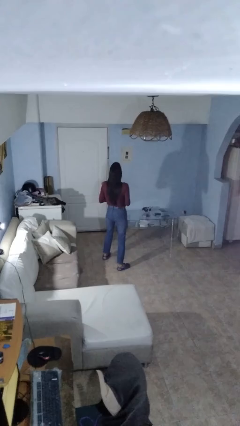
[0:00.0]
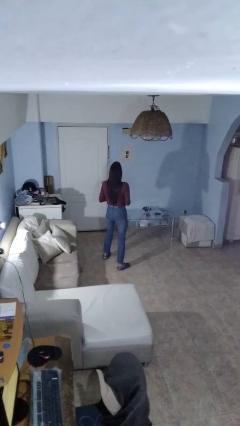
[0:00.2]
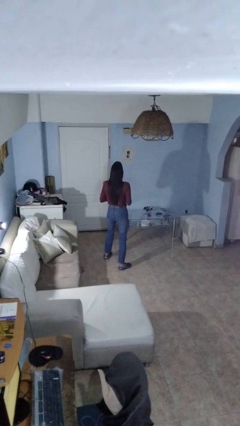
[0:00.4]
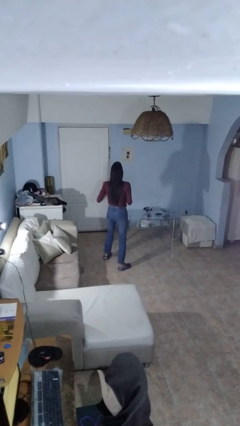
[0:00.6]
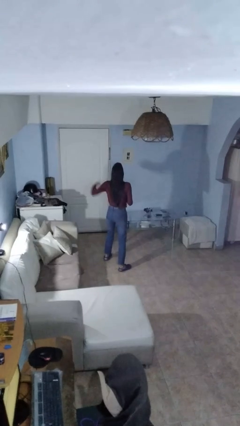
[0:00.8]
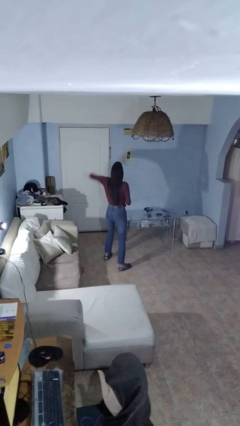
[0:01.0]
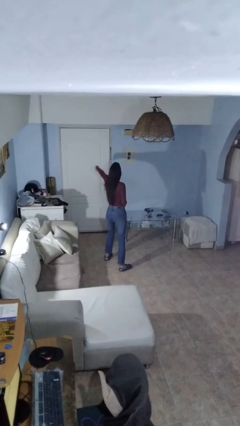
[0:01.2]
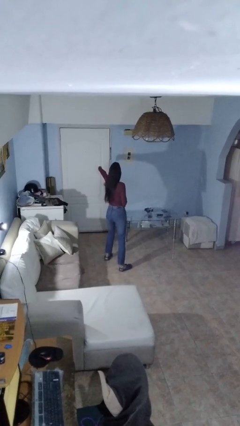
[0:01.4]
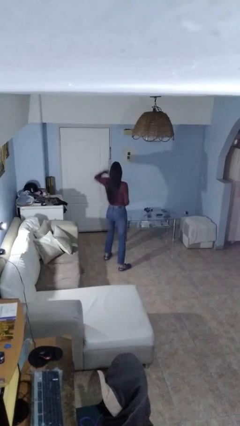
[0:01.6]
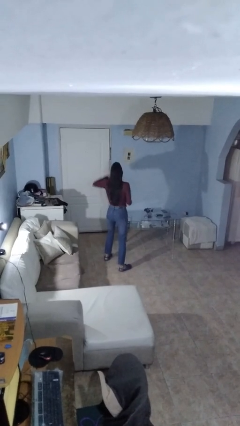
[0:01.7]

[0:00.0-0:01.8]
person karate chop

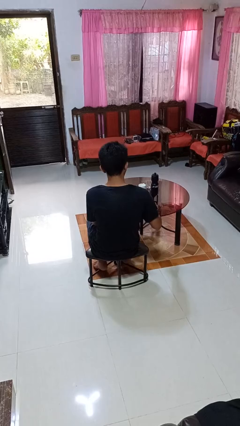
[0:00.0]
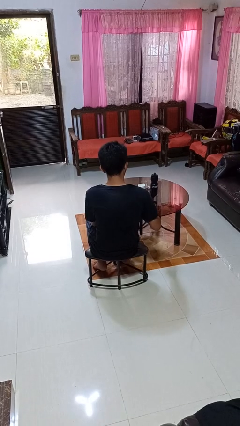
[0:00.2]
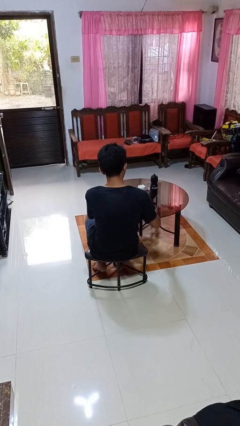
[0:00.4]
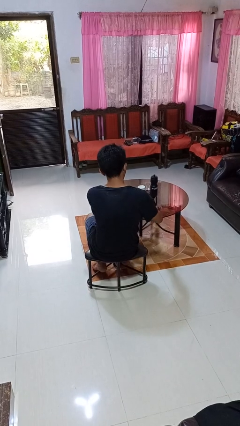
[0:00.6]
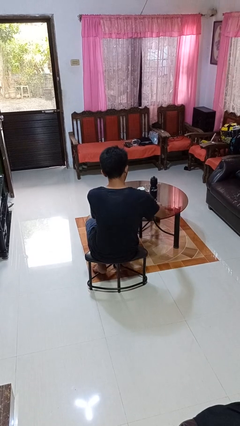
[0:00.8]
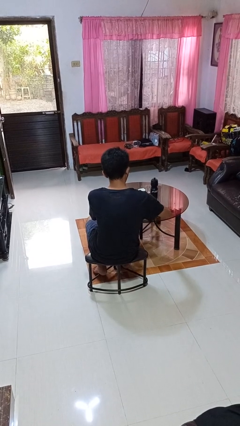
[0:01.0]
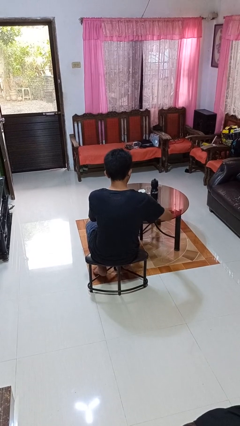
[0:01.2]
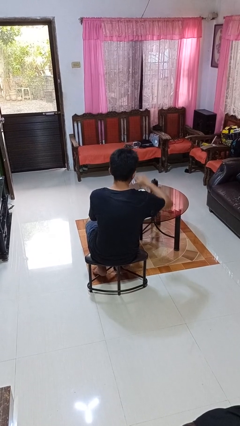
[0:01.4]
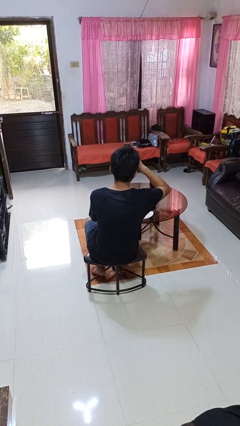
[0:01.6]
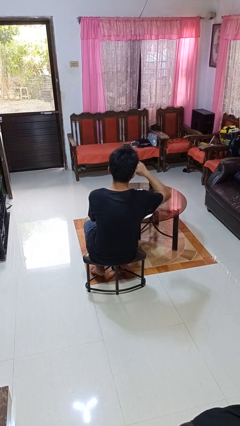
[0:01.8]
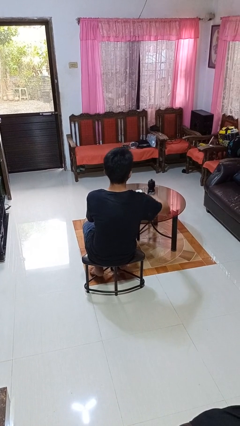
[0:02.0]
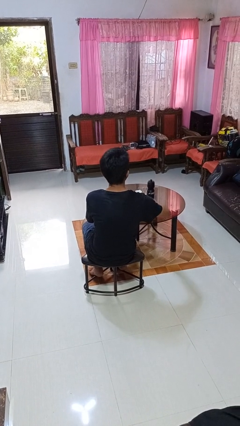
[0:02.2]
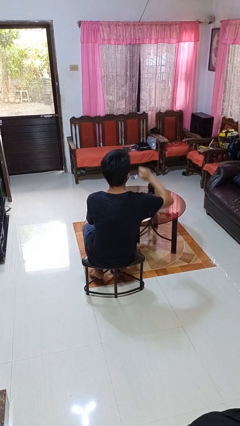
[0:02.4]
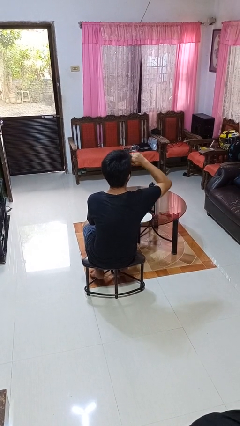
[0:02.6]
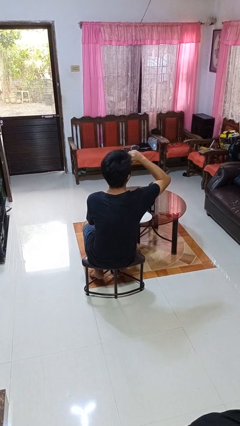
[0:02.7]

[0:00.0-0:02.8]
person eats with utensil

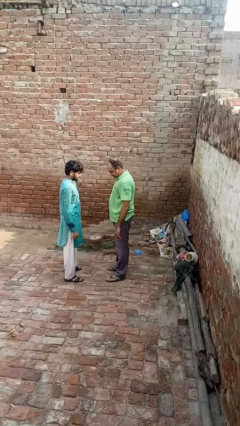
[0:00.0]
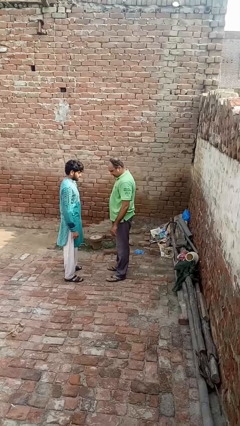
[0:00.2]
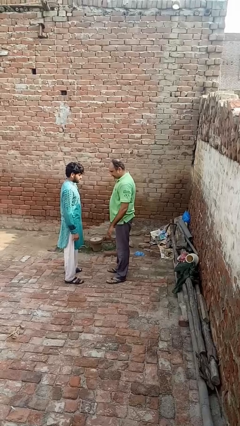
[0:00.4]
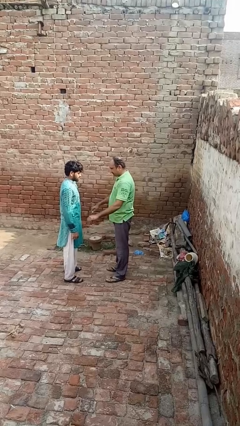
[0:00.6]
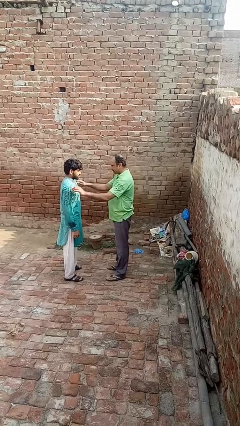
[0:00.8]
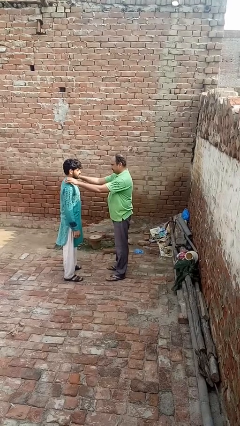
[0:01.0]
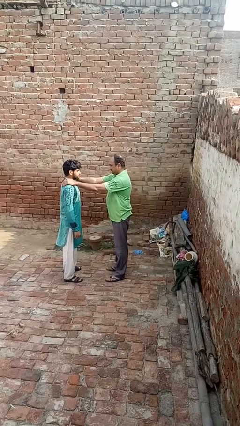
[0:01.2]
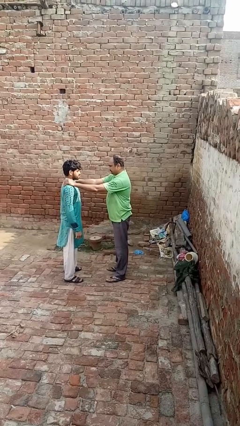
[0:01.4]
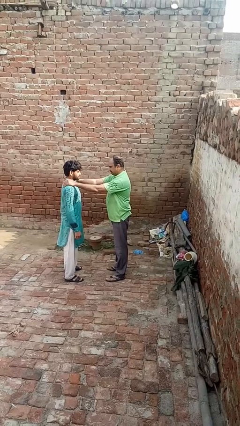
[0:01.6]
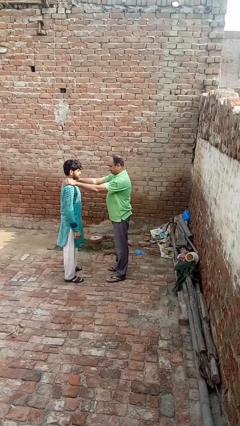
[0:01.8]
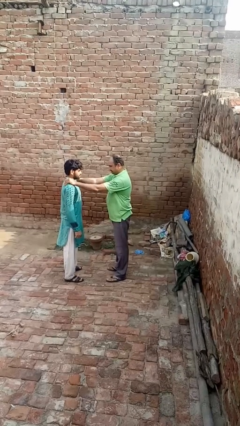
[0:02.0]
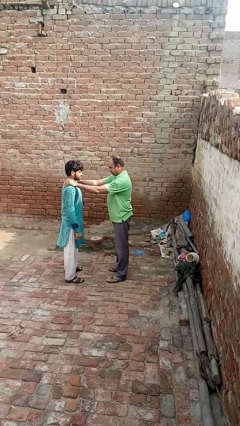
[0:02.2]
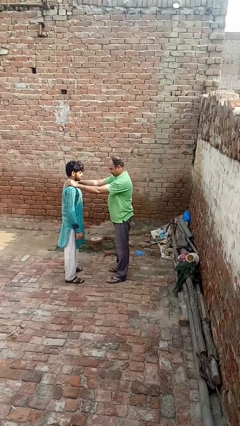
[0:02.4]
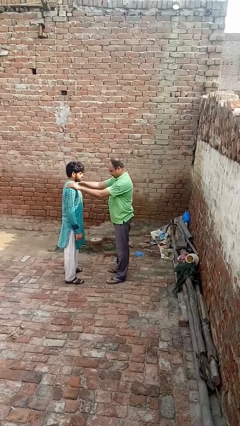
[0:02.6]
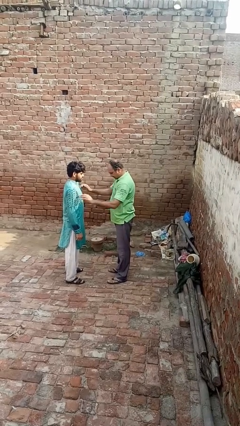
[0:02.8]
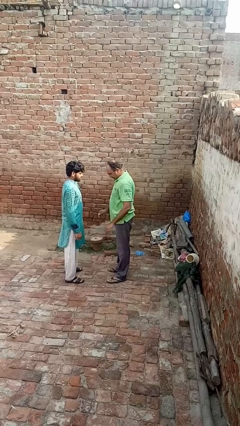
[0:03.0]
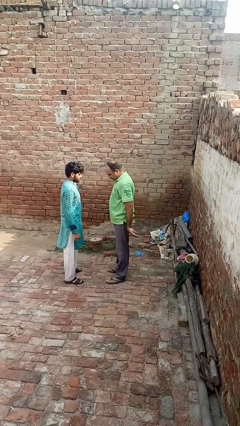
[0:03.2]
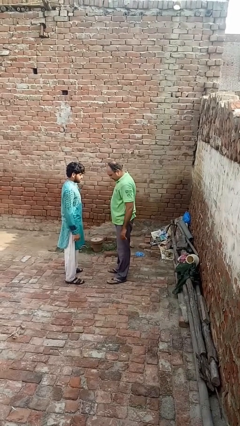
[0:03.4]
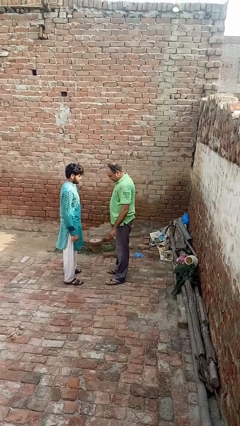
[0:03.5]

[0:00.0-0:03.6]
person pounds shoulders of person

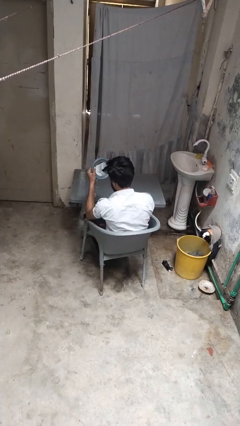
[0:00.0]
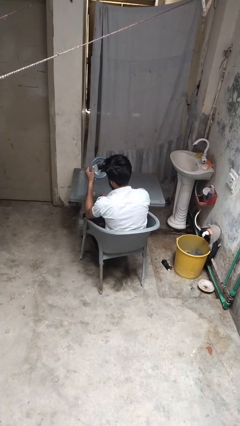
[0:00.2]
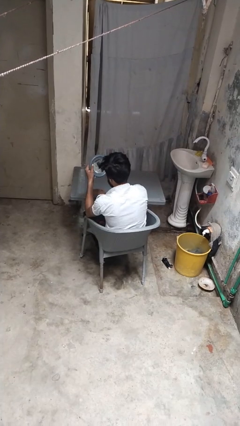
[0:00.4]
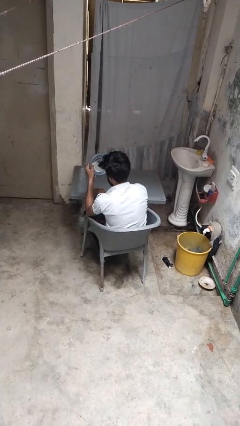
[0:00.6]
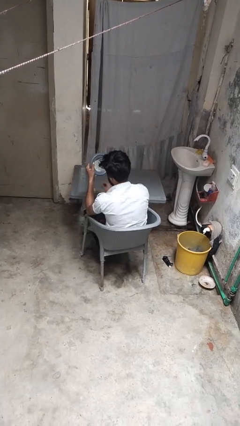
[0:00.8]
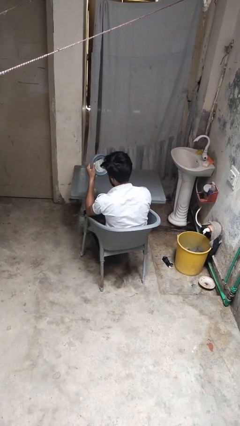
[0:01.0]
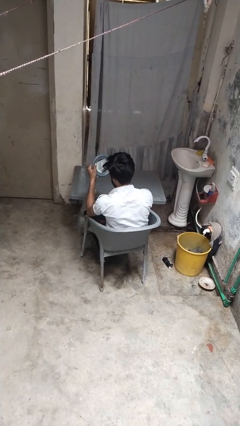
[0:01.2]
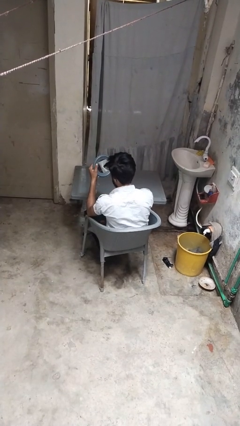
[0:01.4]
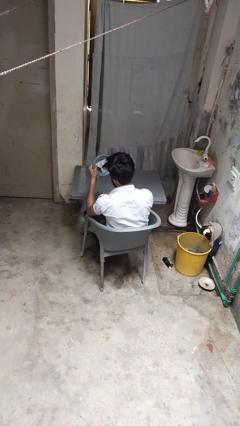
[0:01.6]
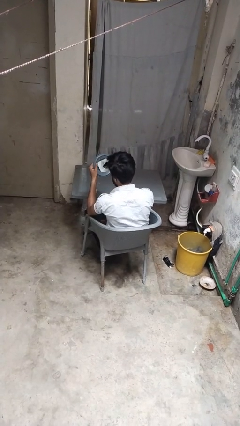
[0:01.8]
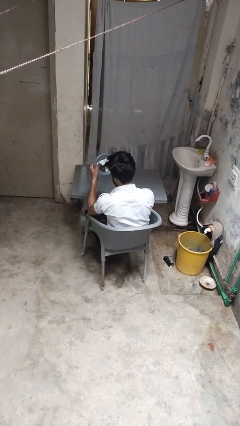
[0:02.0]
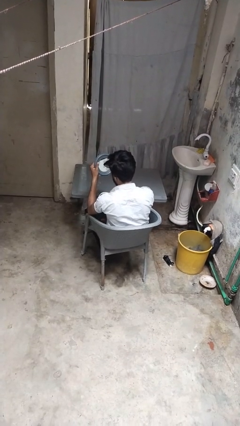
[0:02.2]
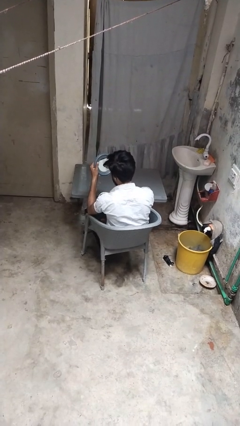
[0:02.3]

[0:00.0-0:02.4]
person applies foundation makeup

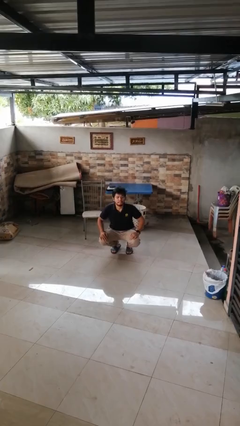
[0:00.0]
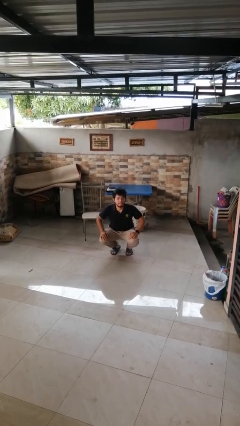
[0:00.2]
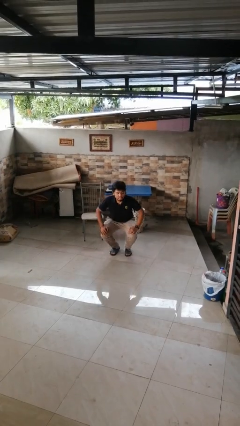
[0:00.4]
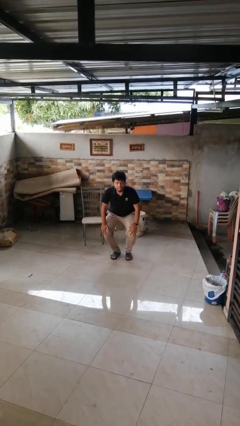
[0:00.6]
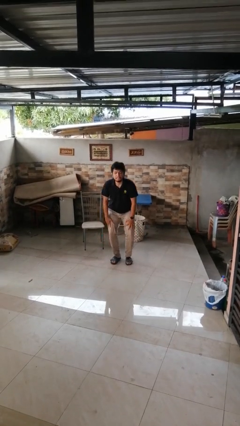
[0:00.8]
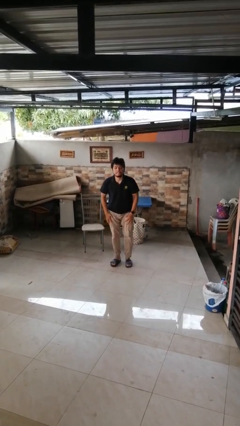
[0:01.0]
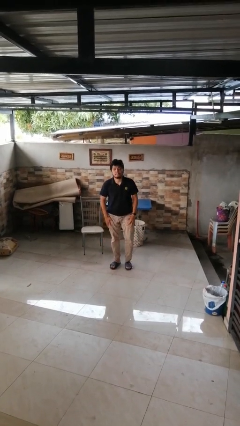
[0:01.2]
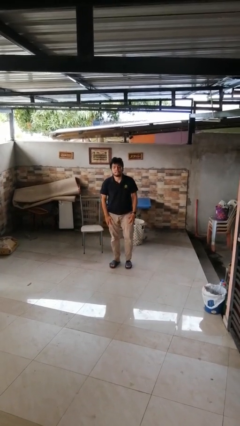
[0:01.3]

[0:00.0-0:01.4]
person stands up

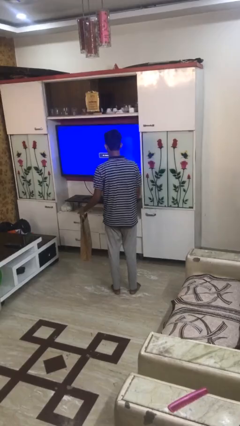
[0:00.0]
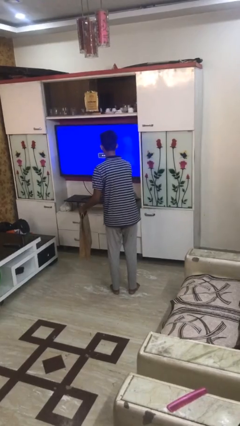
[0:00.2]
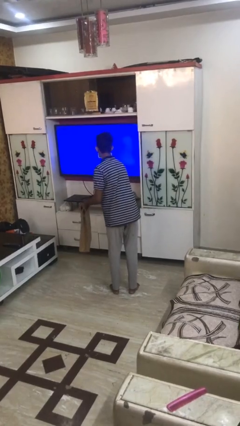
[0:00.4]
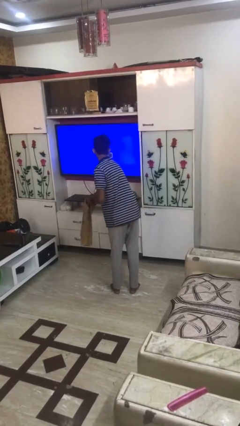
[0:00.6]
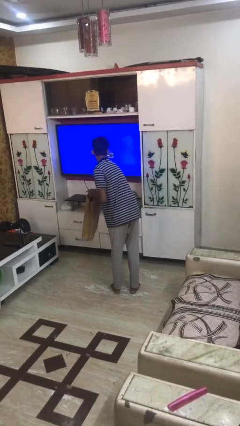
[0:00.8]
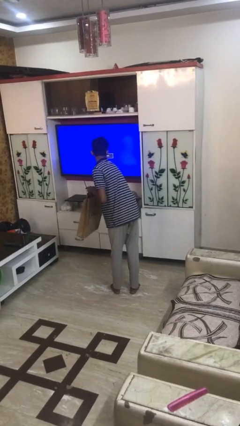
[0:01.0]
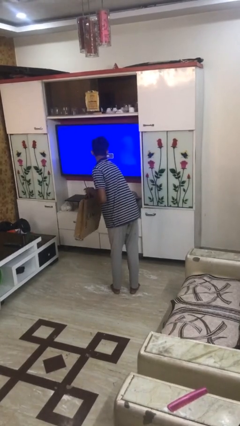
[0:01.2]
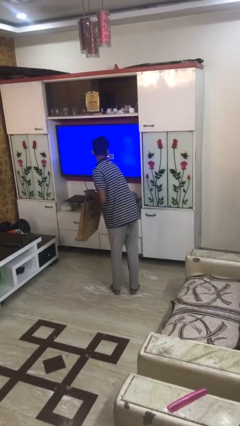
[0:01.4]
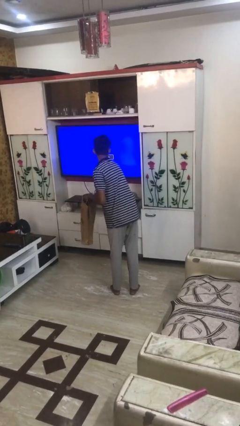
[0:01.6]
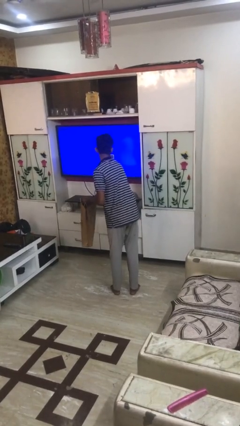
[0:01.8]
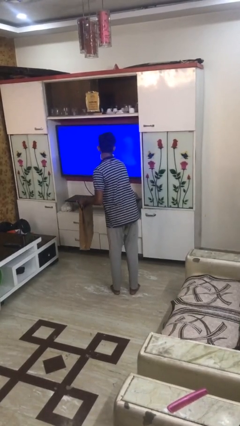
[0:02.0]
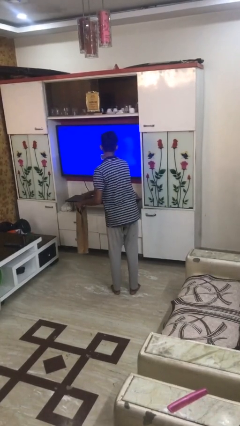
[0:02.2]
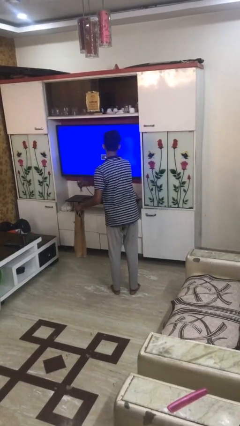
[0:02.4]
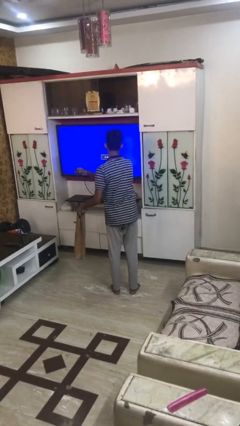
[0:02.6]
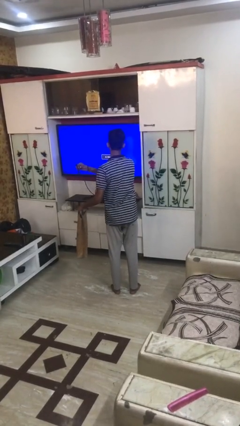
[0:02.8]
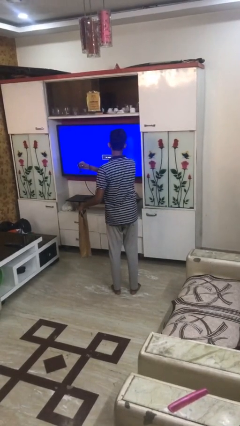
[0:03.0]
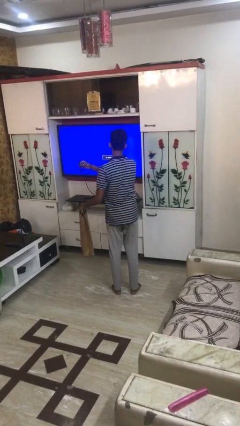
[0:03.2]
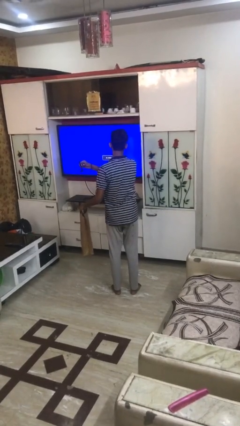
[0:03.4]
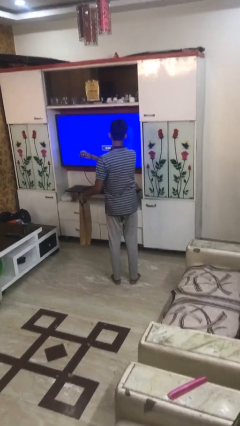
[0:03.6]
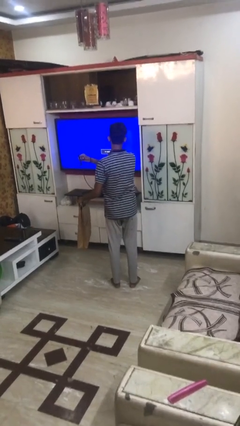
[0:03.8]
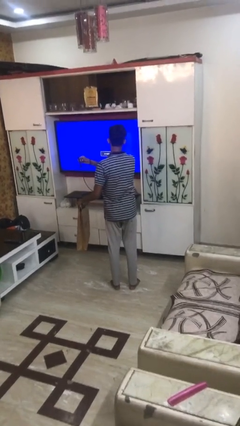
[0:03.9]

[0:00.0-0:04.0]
person takes object from bag

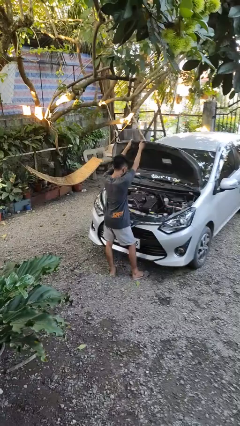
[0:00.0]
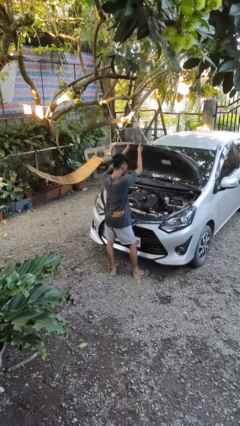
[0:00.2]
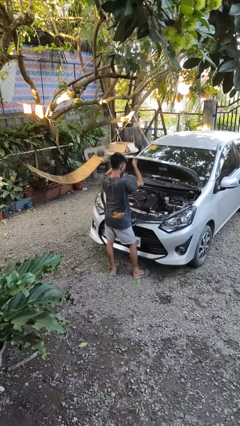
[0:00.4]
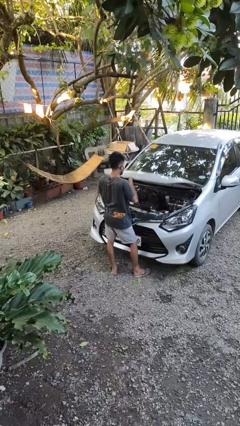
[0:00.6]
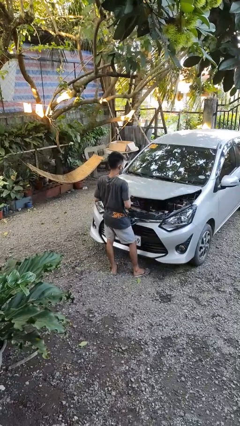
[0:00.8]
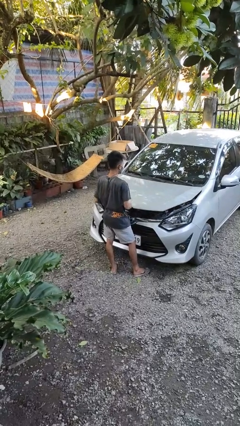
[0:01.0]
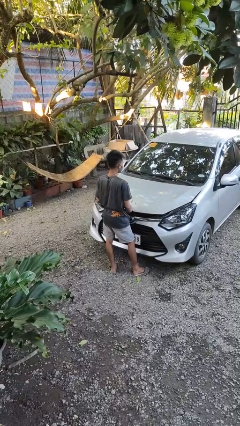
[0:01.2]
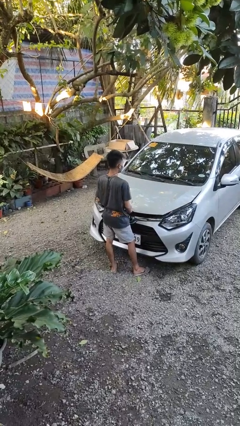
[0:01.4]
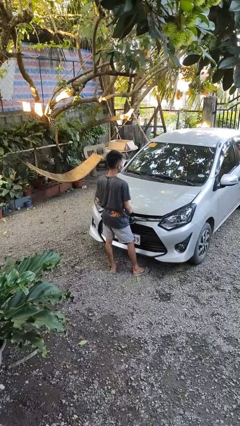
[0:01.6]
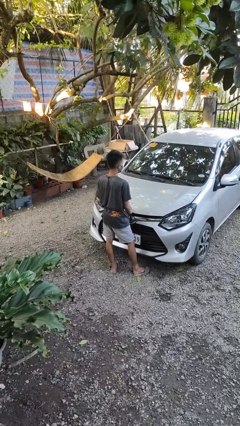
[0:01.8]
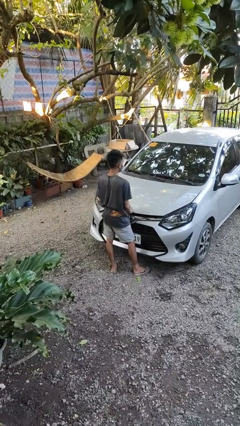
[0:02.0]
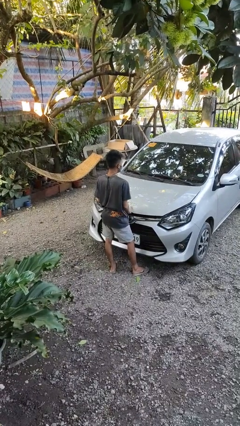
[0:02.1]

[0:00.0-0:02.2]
person closes car hood
